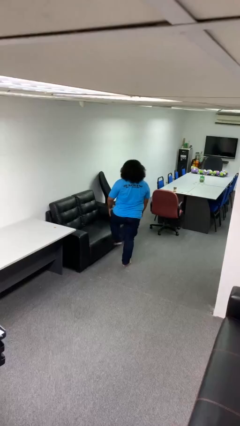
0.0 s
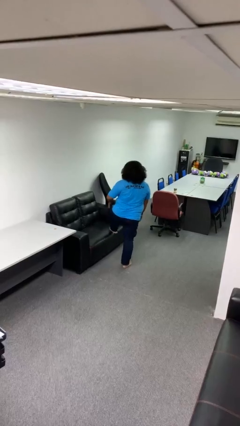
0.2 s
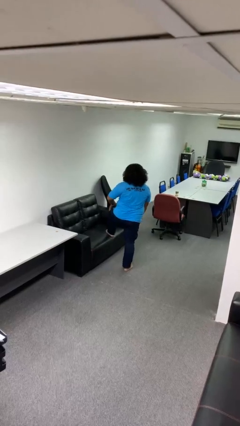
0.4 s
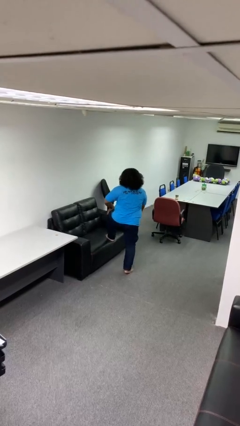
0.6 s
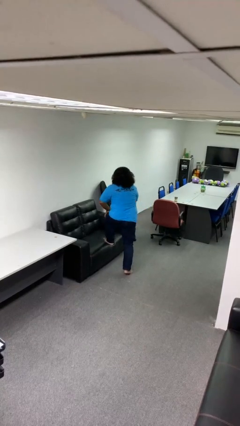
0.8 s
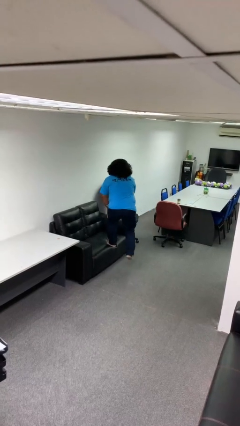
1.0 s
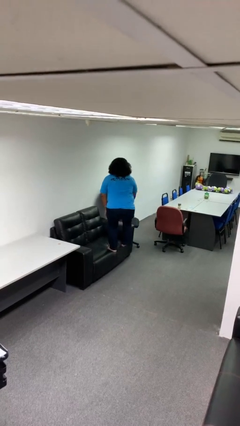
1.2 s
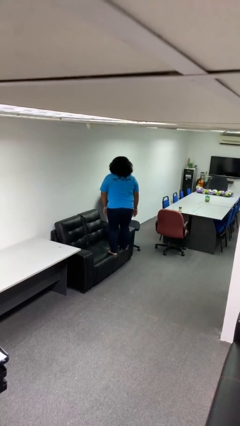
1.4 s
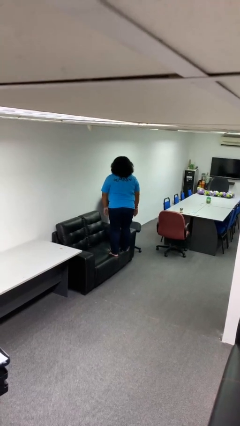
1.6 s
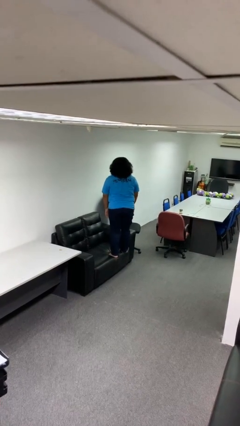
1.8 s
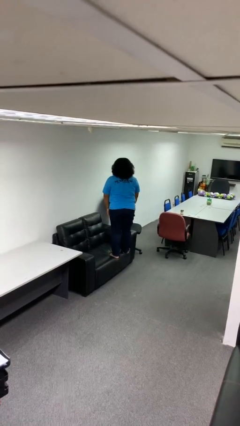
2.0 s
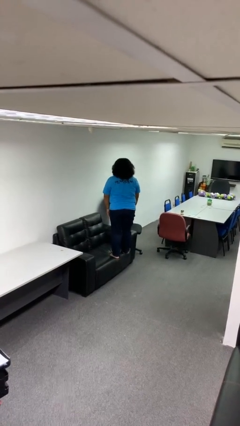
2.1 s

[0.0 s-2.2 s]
person climbs on couch

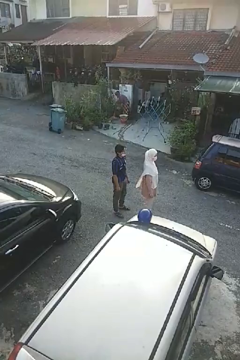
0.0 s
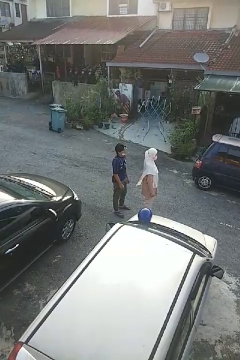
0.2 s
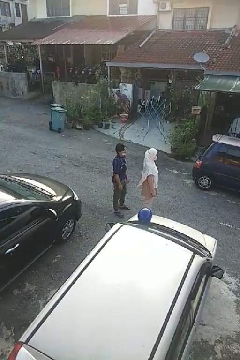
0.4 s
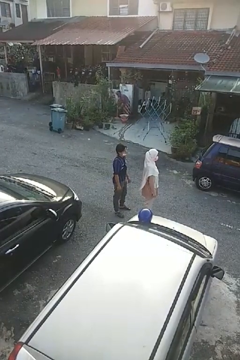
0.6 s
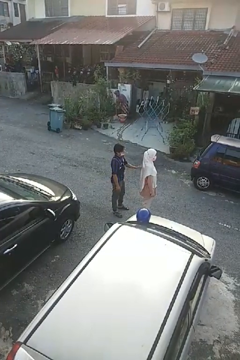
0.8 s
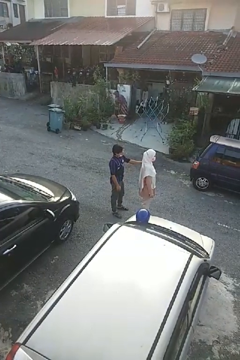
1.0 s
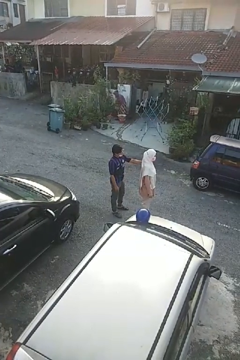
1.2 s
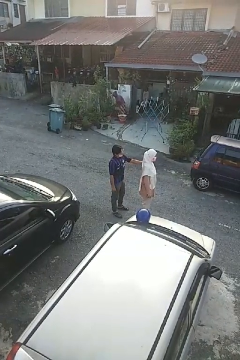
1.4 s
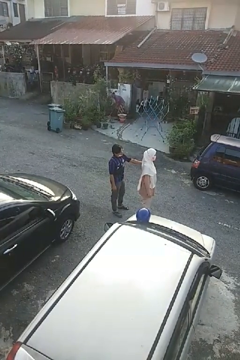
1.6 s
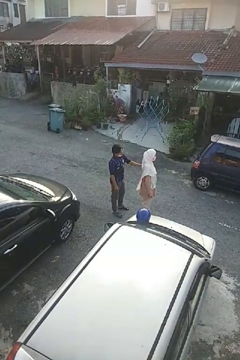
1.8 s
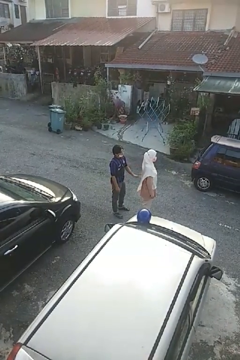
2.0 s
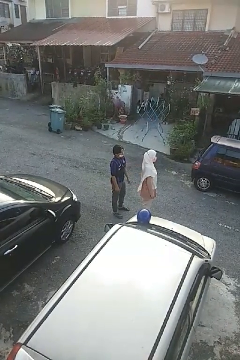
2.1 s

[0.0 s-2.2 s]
person touches back of person

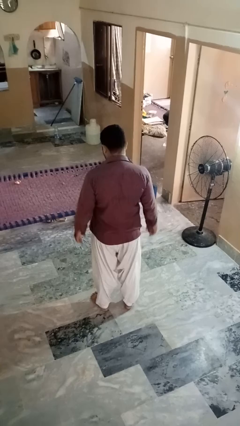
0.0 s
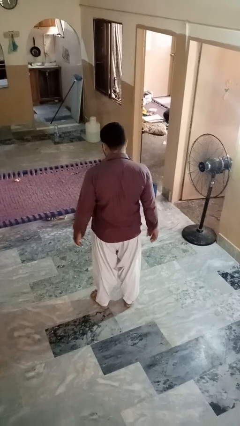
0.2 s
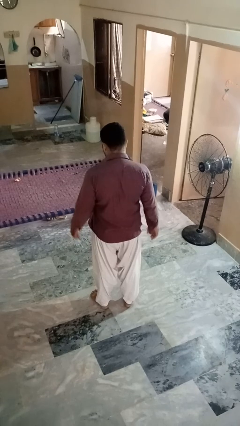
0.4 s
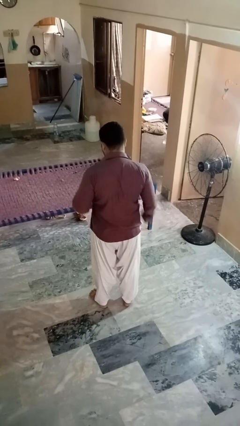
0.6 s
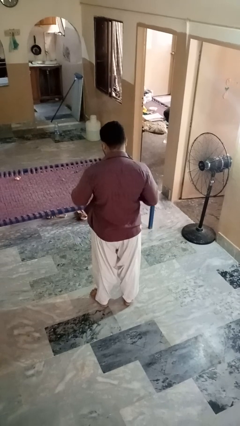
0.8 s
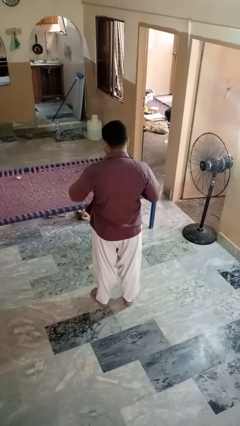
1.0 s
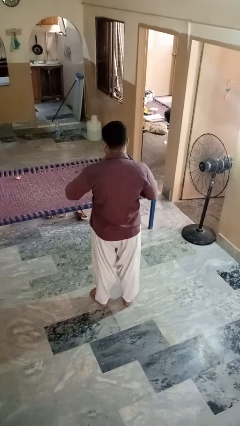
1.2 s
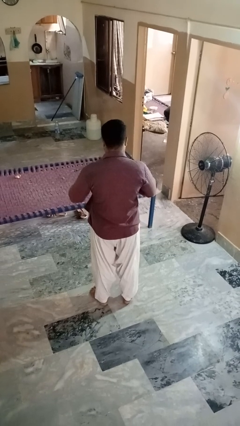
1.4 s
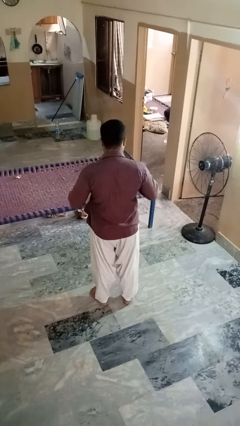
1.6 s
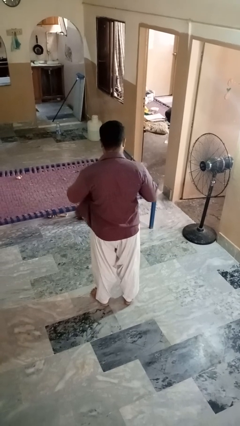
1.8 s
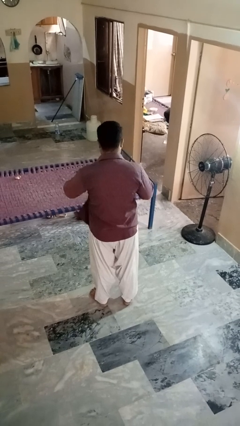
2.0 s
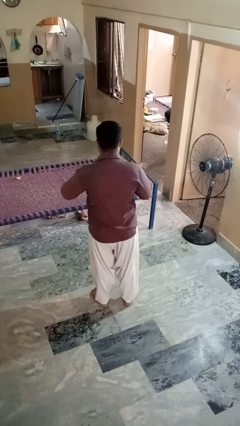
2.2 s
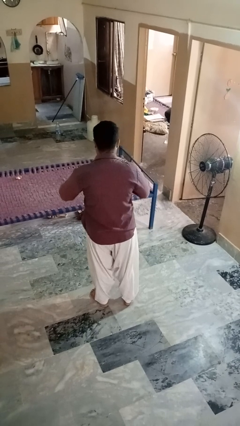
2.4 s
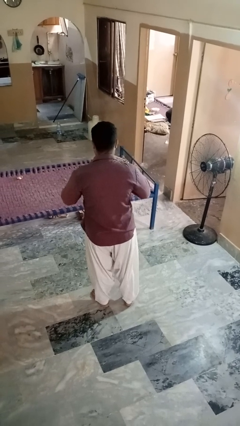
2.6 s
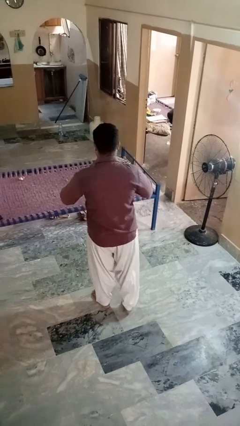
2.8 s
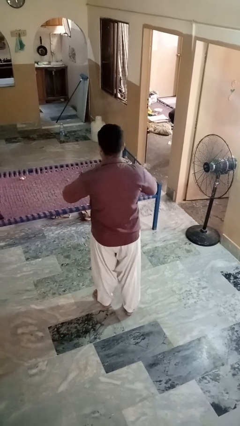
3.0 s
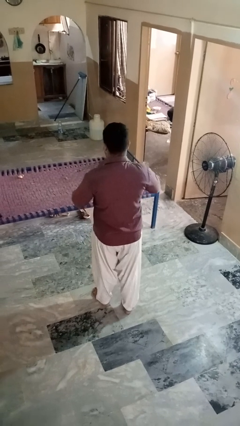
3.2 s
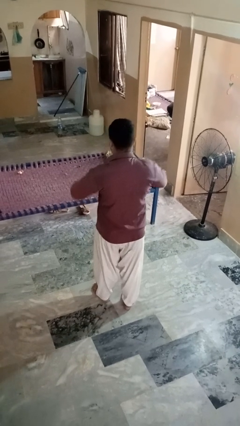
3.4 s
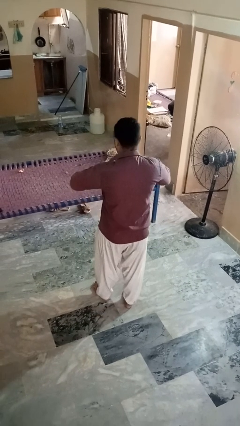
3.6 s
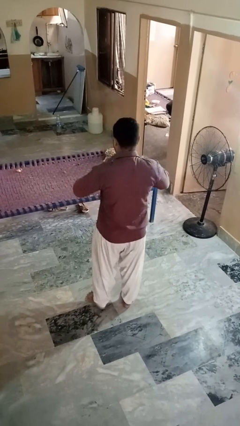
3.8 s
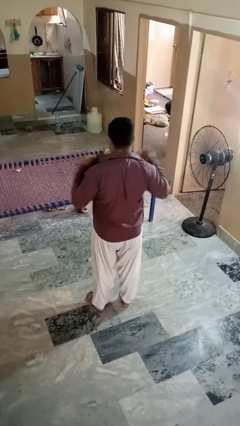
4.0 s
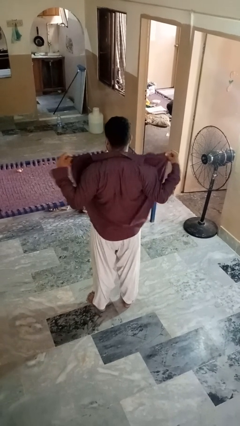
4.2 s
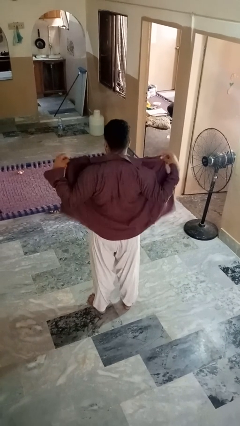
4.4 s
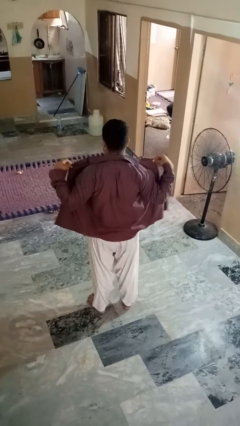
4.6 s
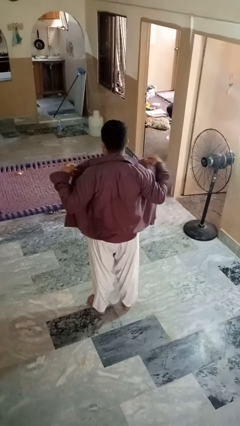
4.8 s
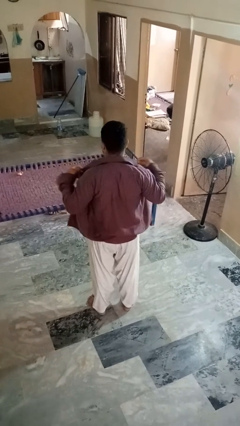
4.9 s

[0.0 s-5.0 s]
person unbuttons shirt

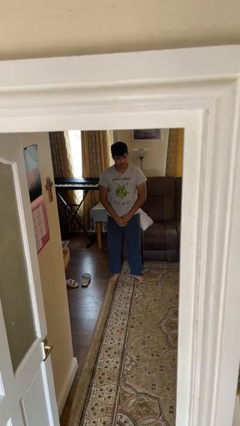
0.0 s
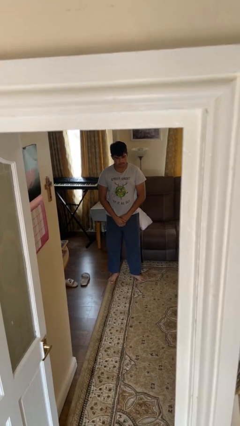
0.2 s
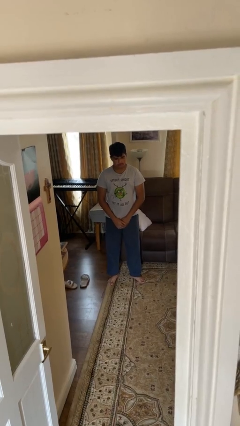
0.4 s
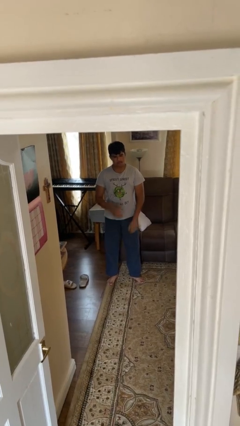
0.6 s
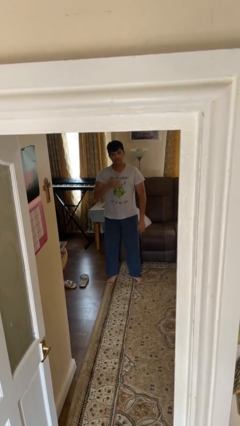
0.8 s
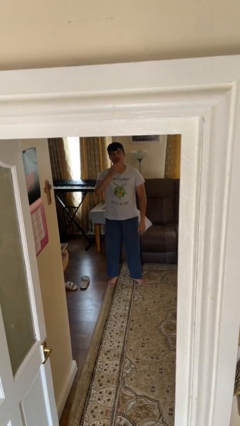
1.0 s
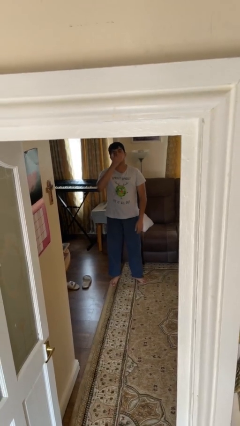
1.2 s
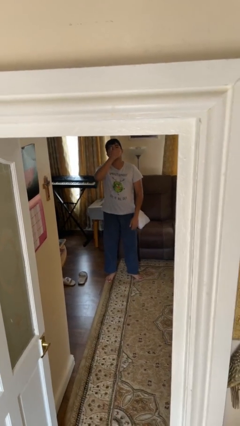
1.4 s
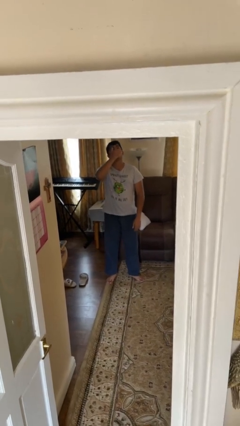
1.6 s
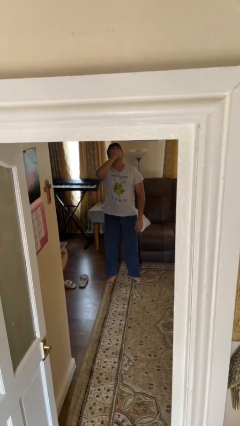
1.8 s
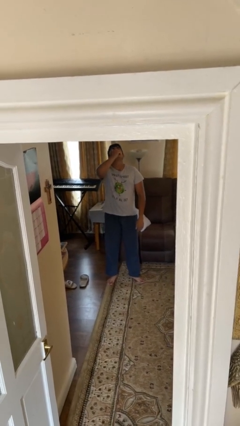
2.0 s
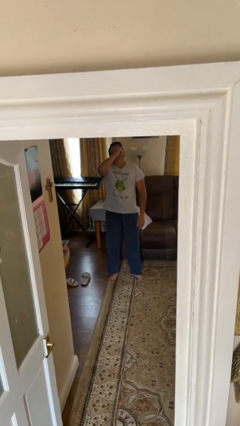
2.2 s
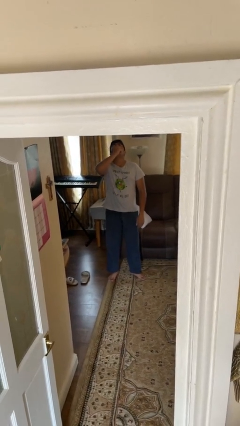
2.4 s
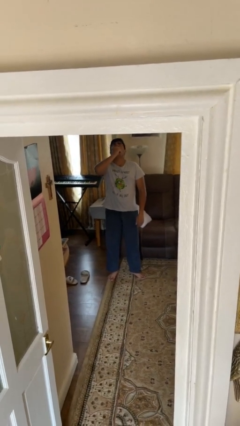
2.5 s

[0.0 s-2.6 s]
person yawns

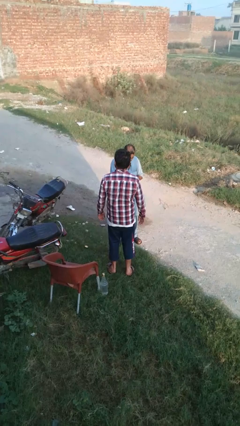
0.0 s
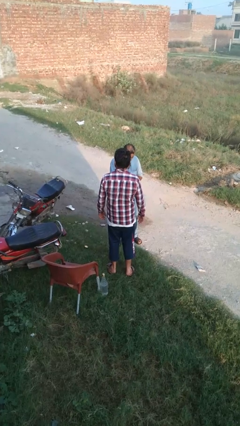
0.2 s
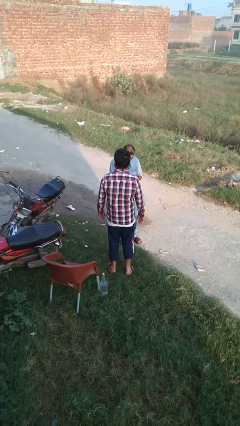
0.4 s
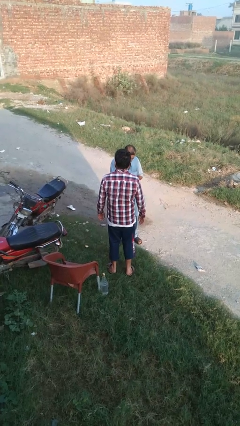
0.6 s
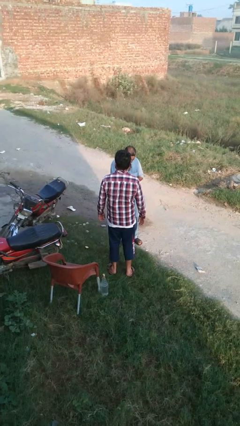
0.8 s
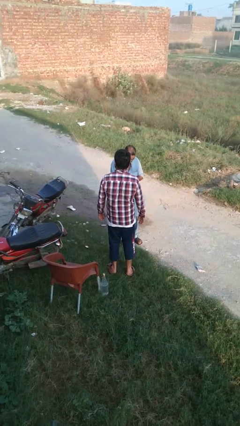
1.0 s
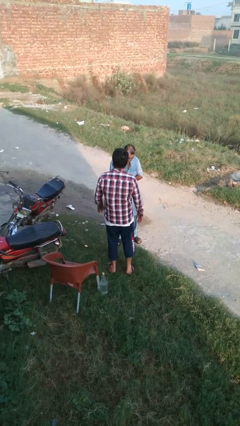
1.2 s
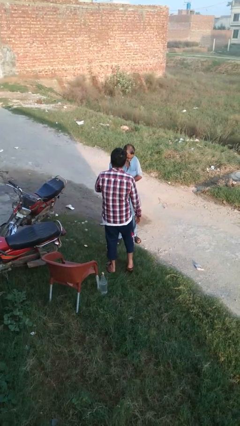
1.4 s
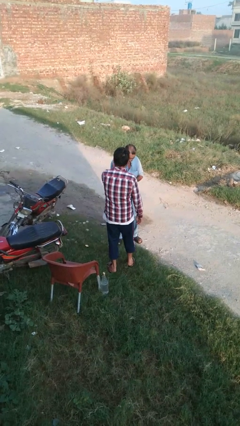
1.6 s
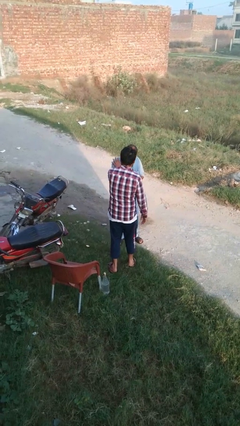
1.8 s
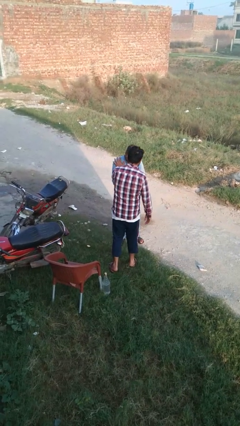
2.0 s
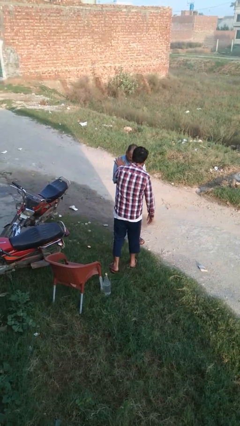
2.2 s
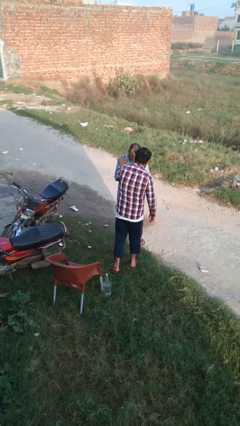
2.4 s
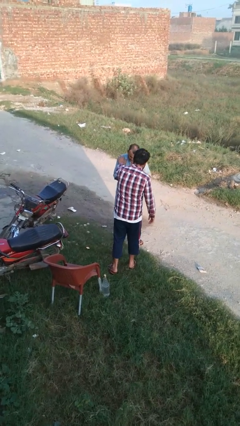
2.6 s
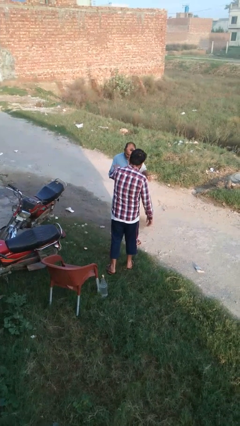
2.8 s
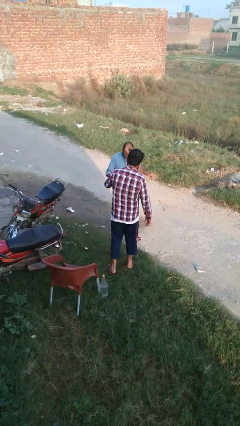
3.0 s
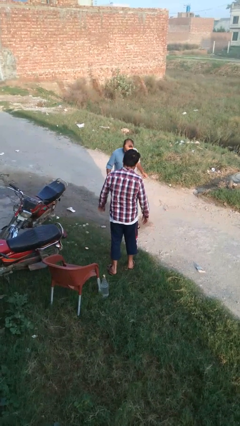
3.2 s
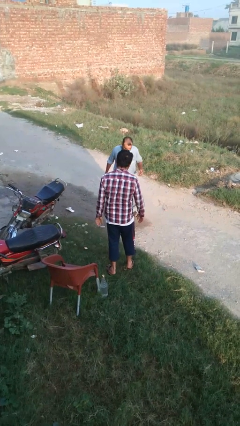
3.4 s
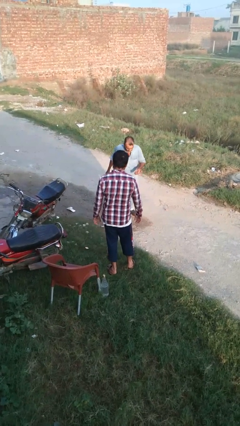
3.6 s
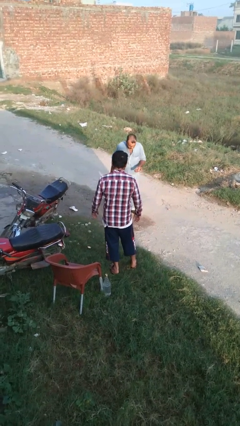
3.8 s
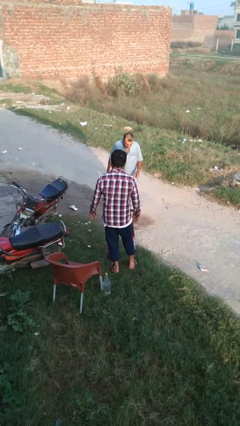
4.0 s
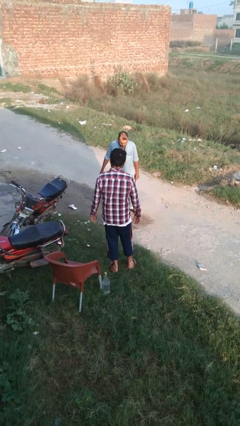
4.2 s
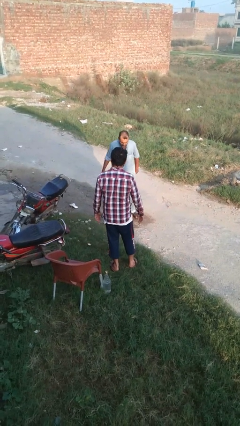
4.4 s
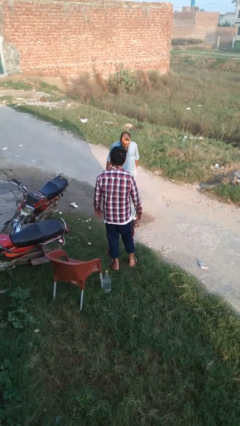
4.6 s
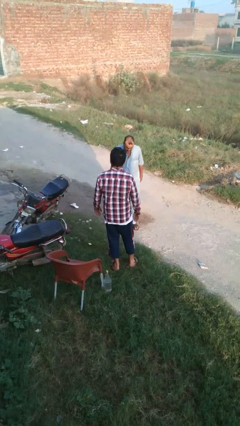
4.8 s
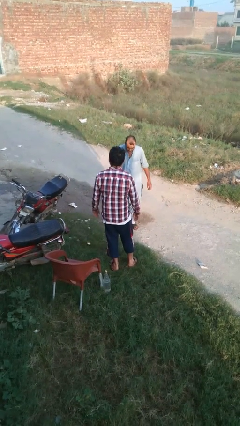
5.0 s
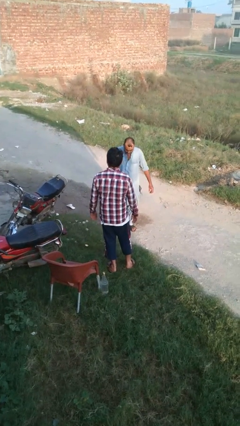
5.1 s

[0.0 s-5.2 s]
person shoves person

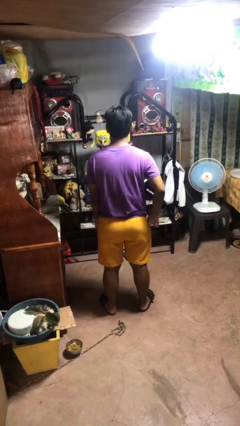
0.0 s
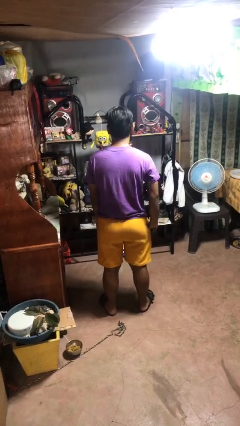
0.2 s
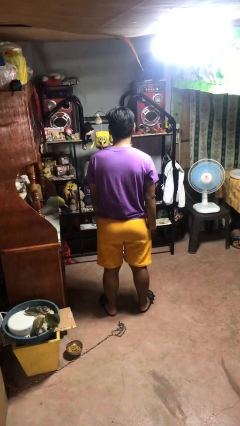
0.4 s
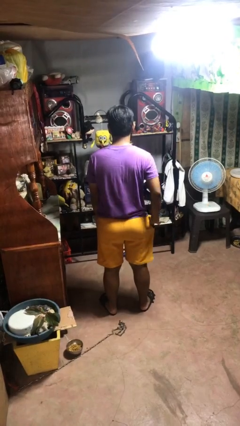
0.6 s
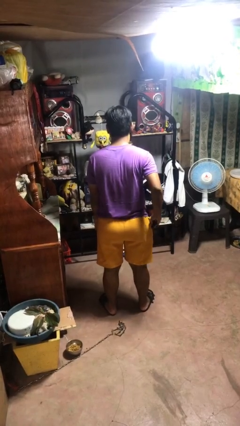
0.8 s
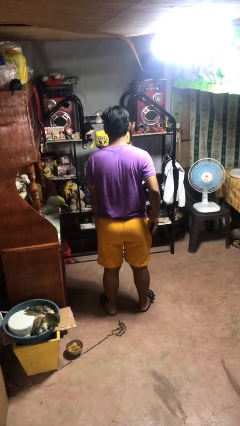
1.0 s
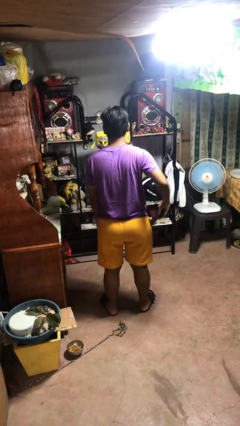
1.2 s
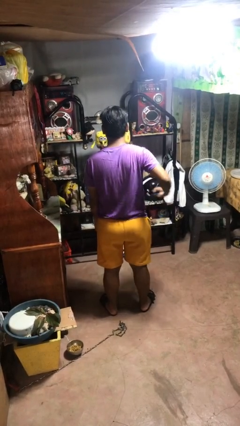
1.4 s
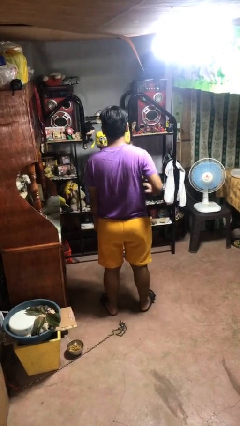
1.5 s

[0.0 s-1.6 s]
person takes phone from pocket
